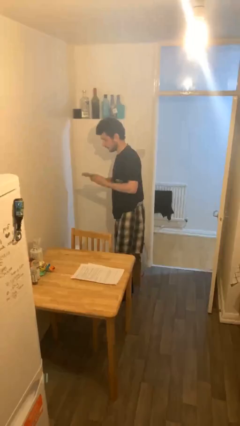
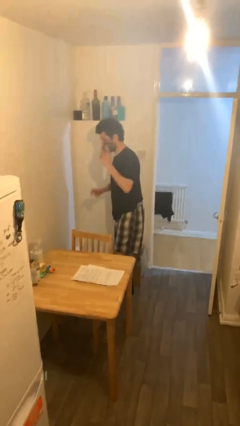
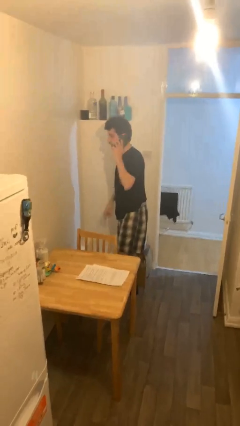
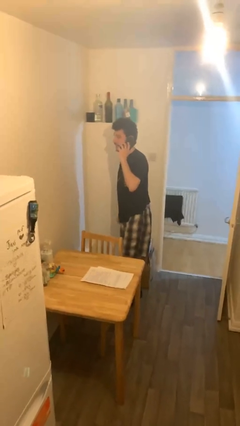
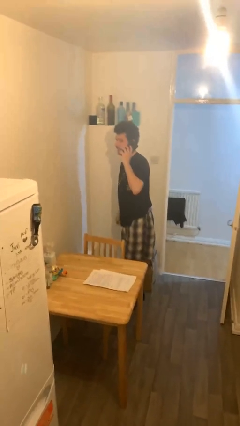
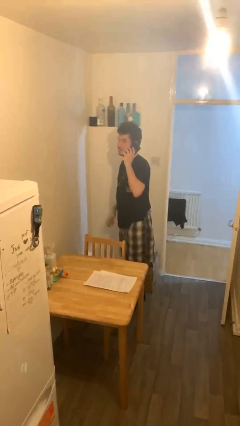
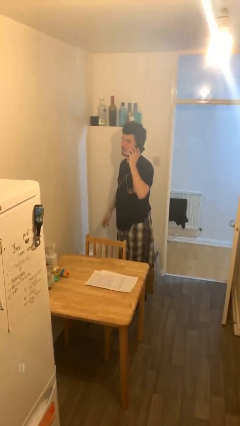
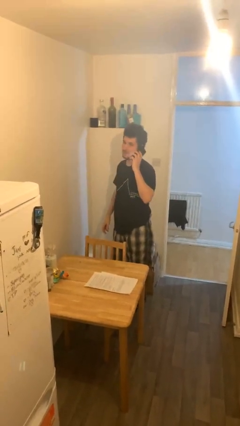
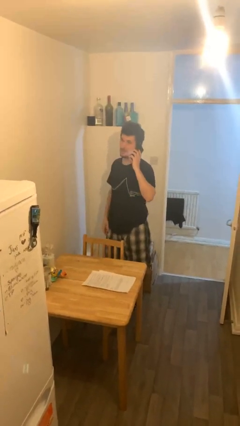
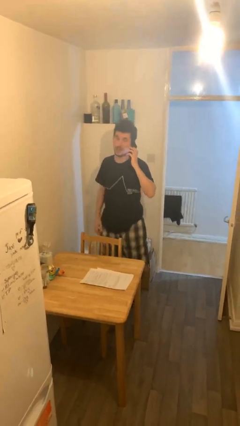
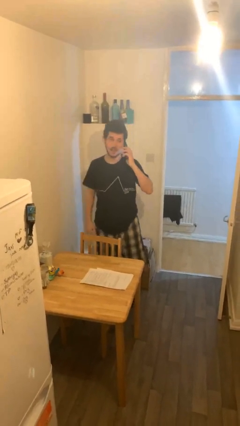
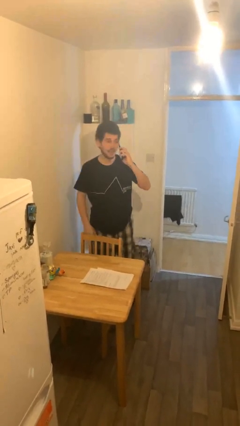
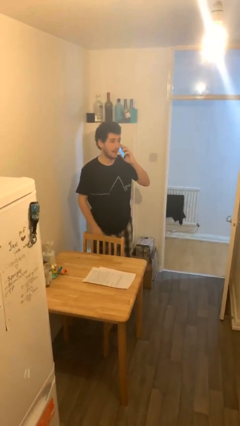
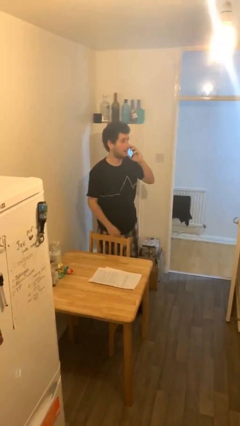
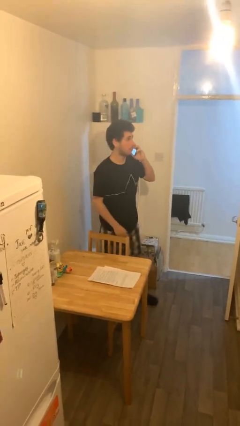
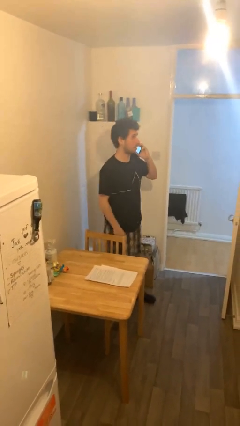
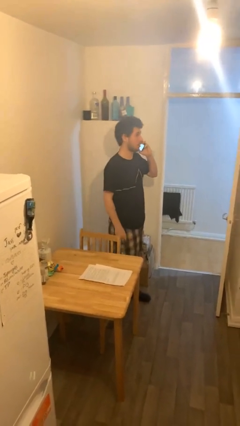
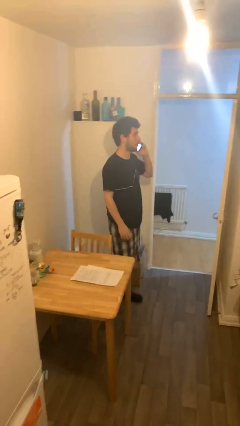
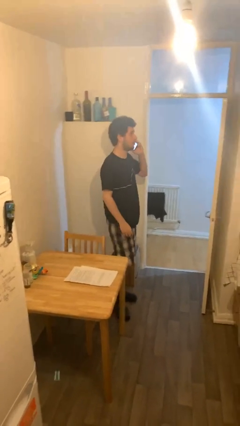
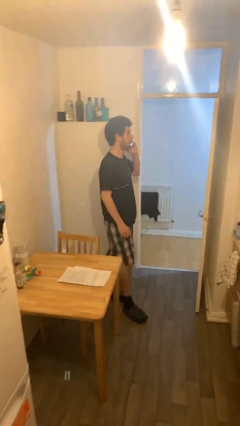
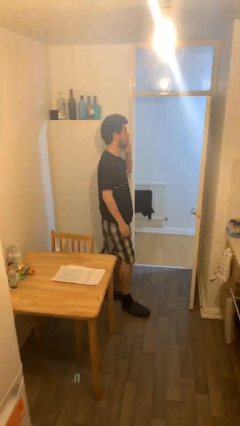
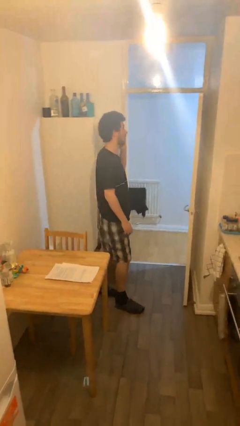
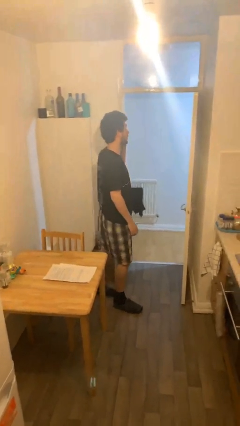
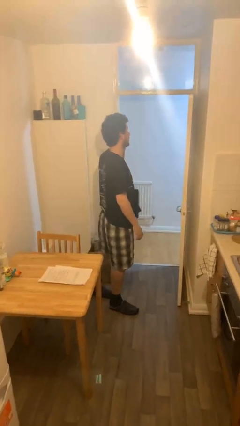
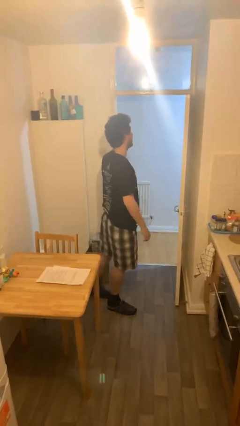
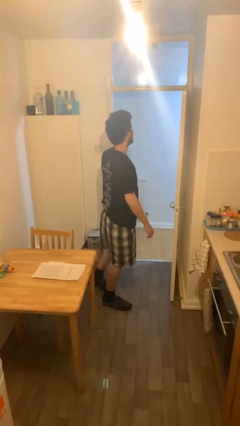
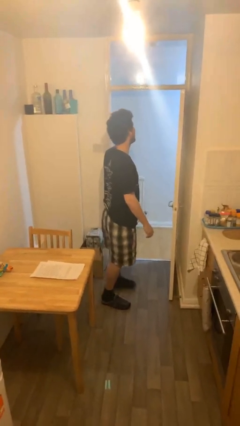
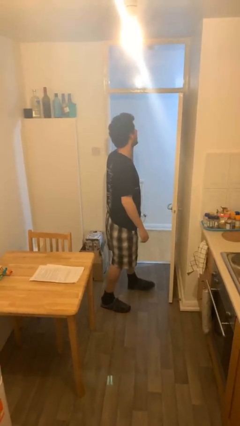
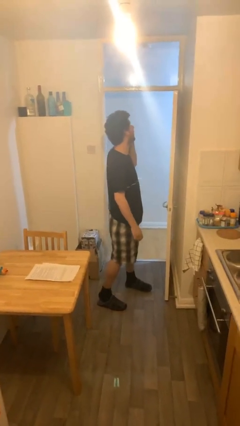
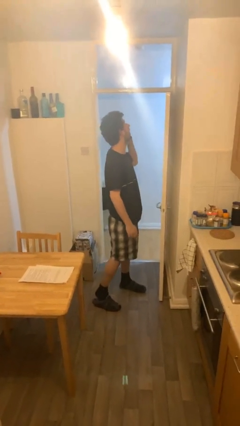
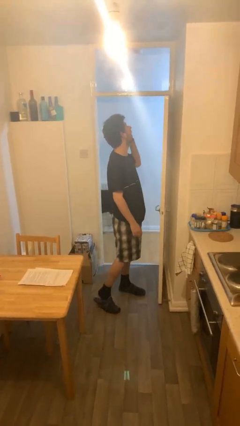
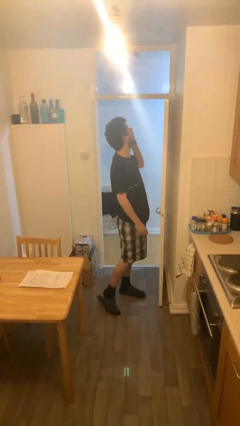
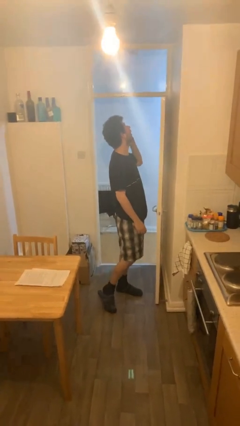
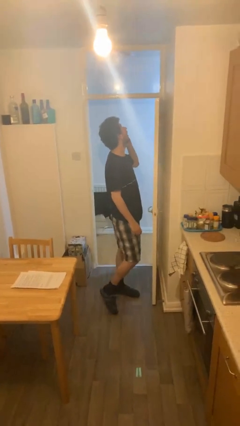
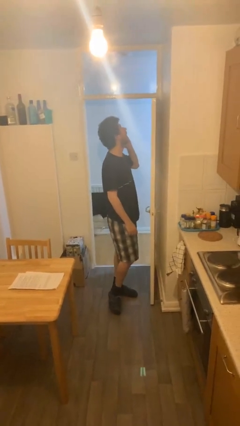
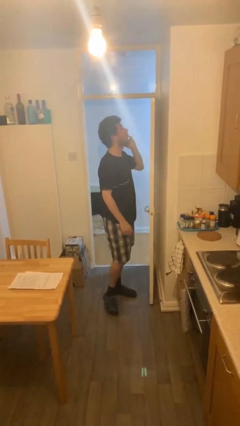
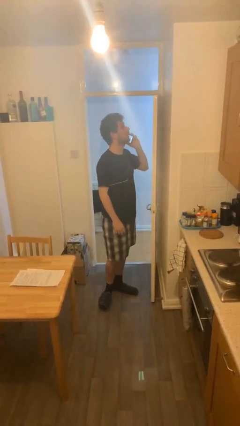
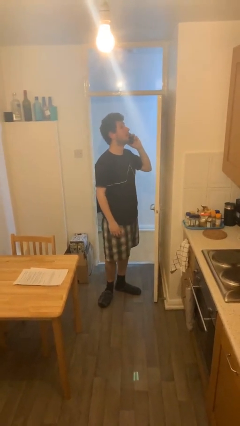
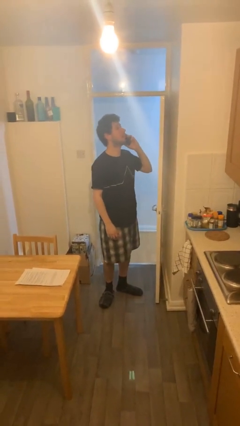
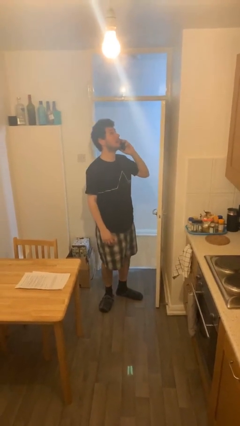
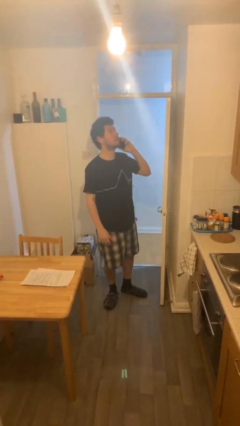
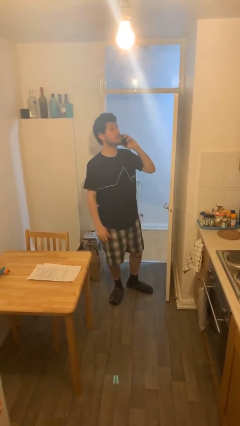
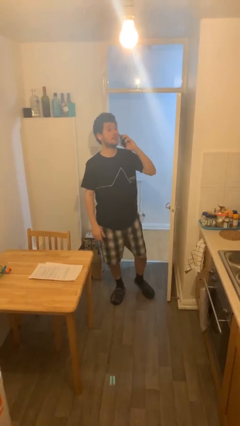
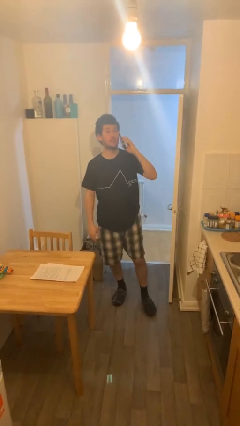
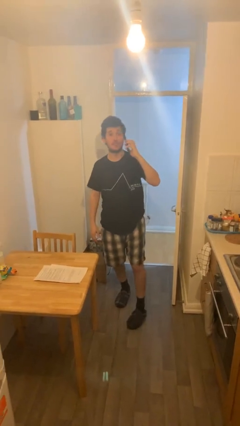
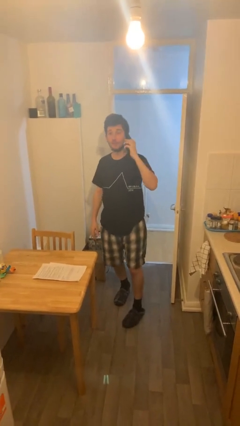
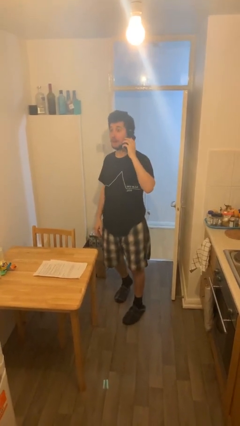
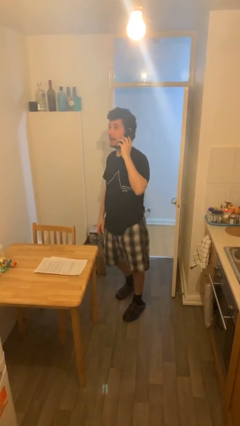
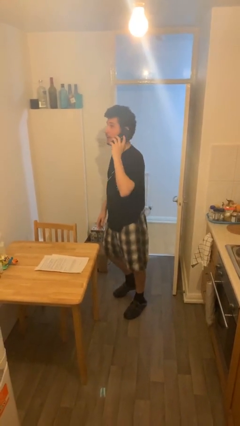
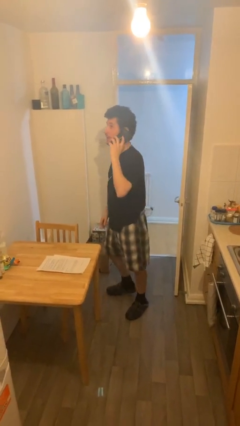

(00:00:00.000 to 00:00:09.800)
person talks on phone

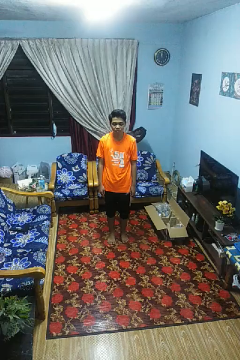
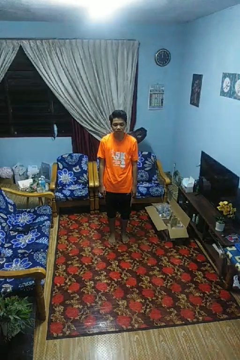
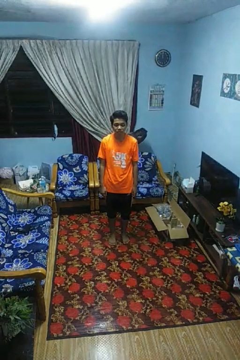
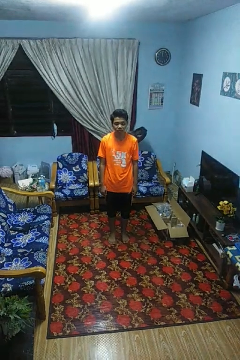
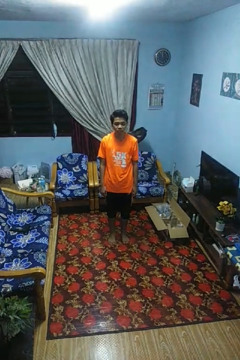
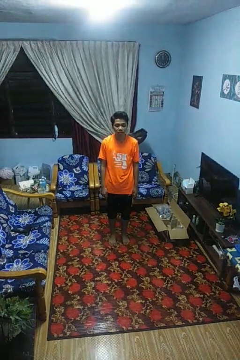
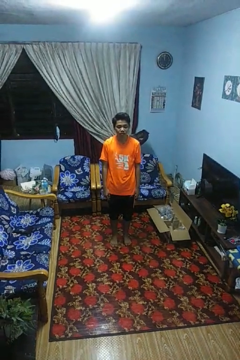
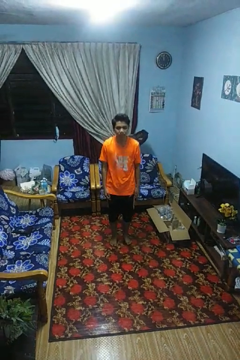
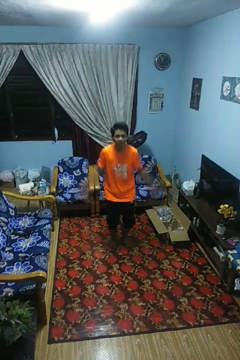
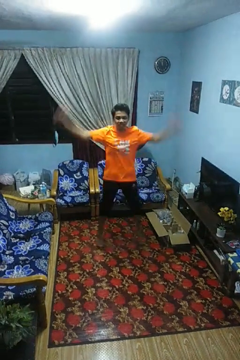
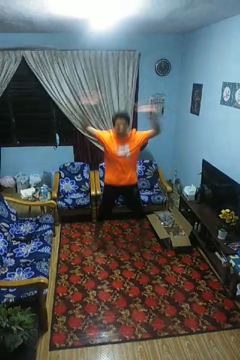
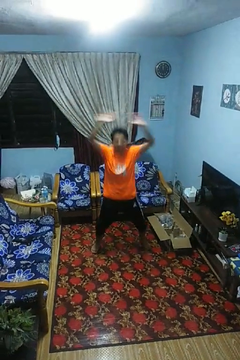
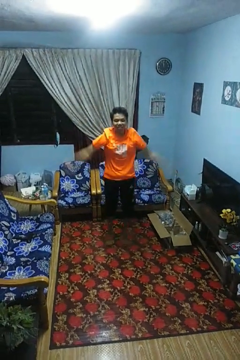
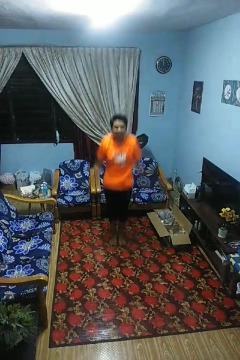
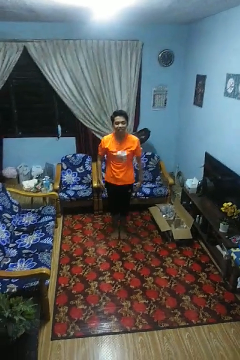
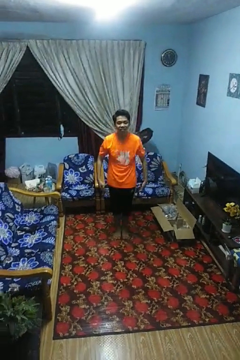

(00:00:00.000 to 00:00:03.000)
person exercises with jumping jacks

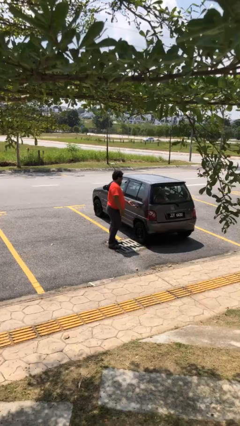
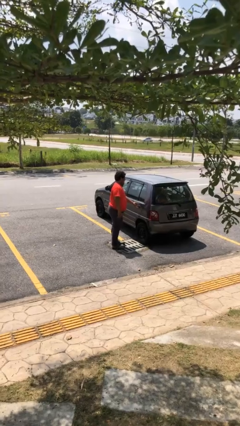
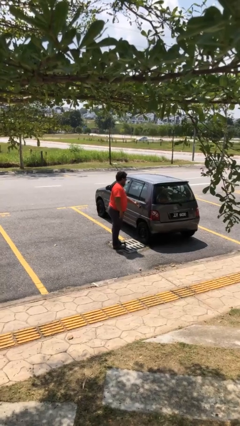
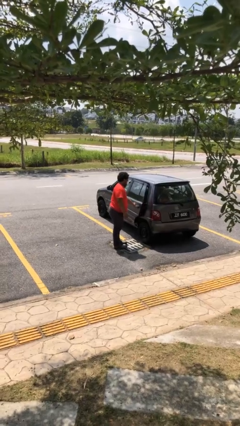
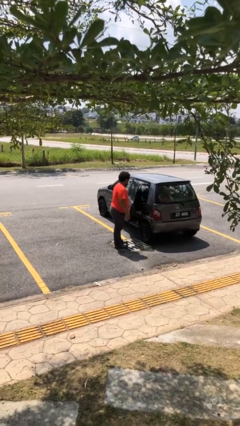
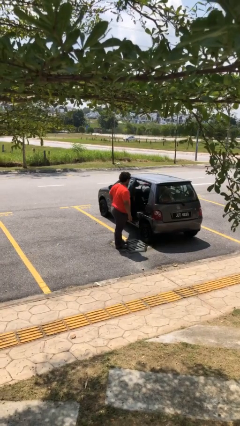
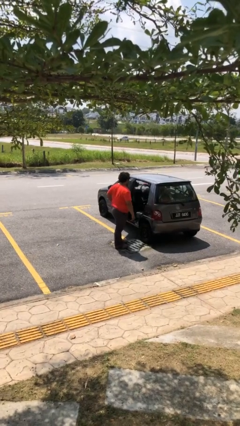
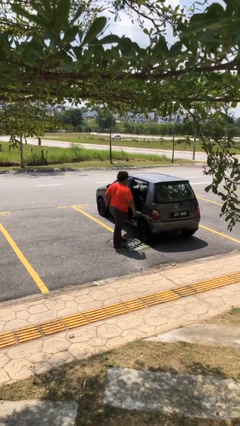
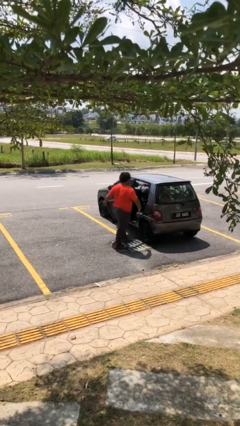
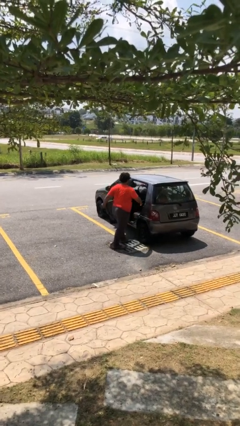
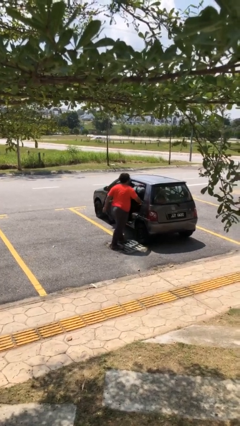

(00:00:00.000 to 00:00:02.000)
person opens car door

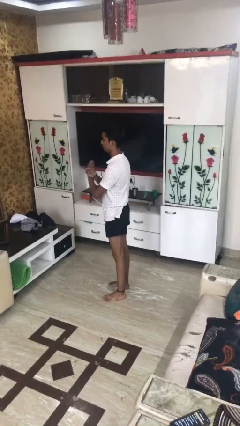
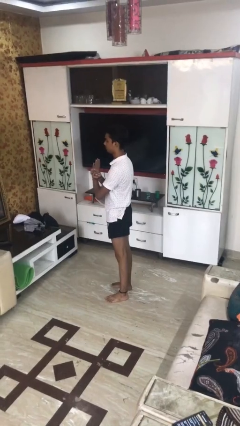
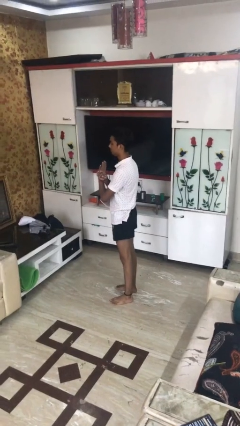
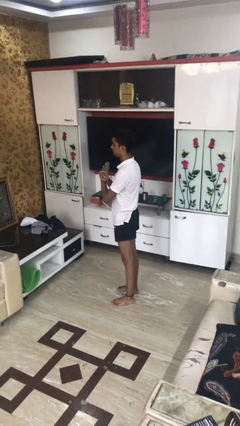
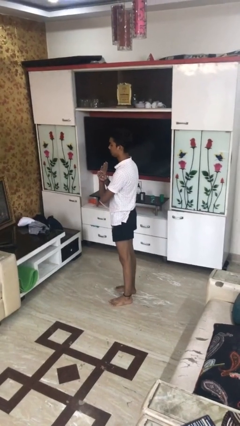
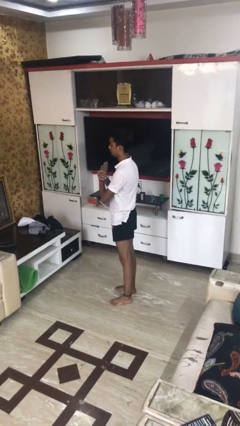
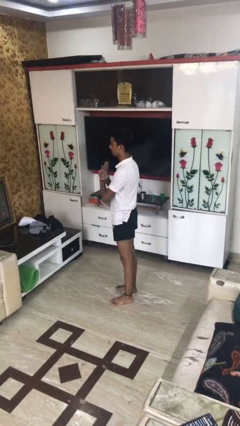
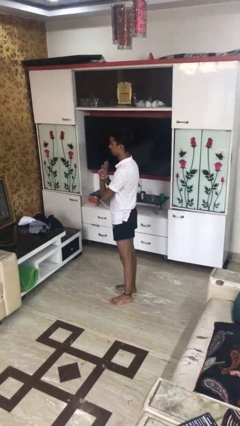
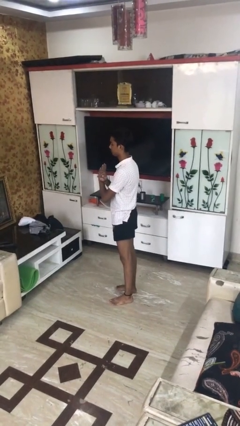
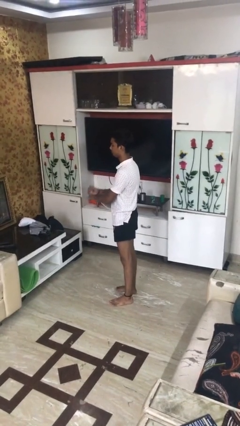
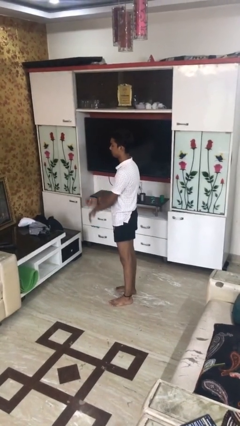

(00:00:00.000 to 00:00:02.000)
person gestures arms x

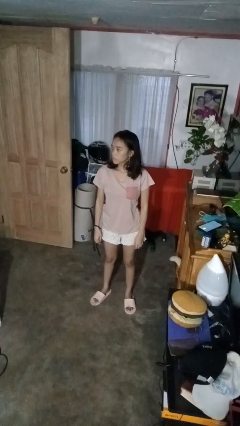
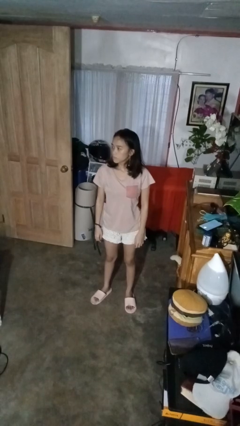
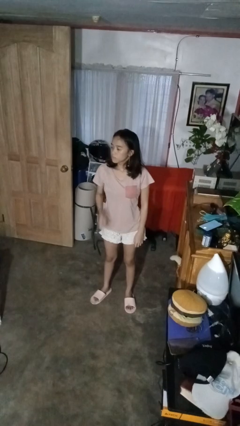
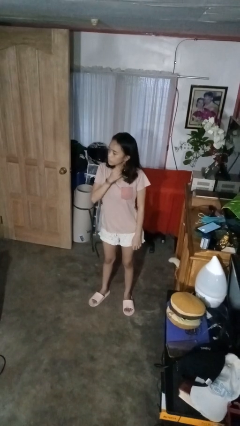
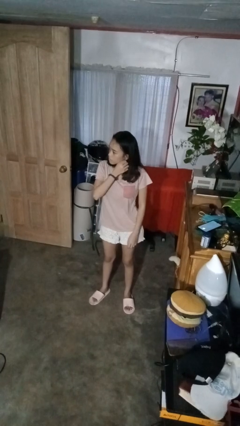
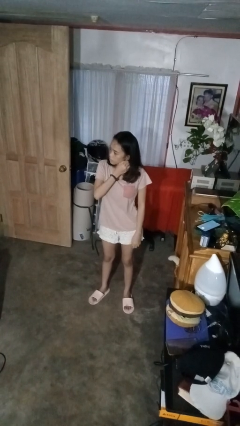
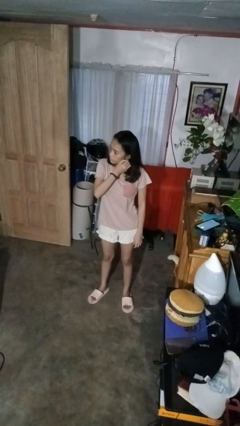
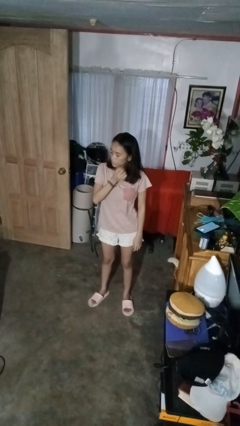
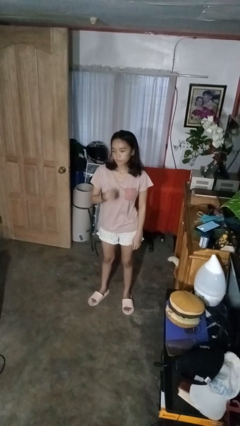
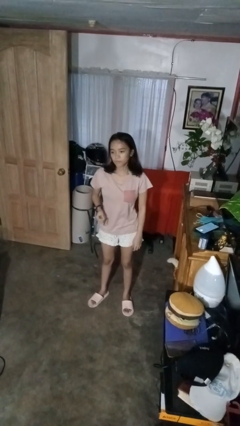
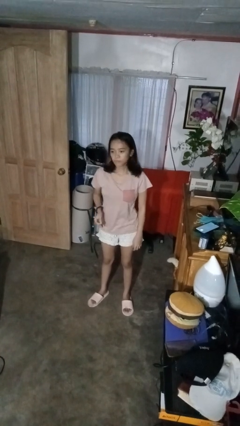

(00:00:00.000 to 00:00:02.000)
person takes off earrings
